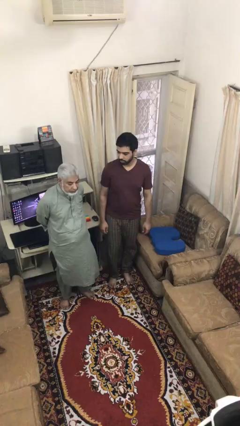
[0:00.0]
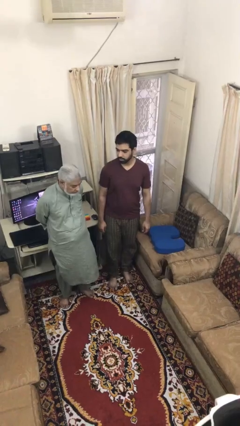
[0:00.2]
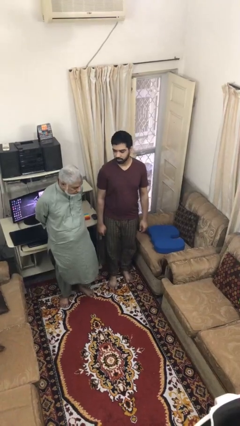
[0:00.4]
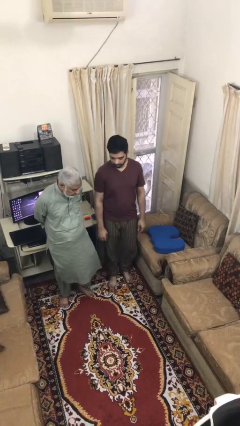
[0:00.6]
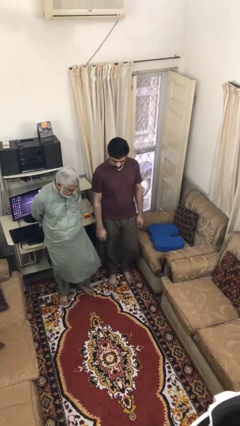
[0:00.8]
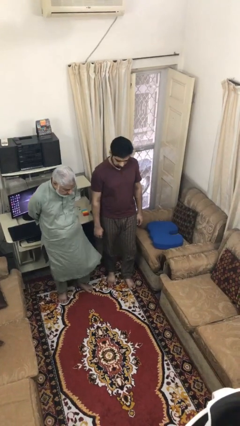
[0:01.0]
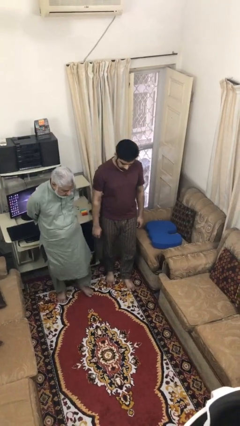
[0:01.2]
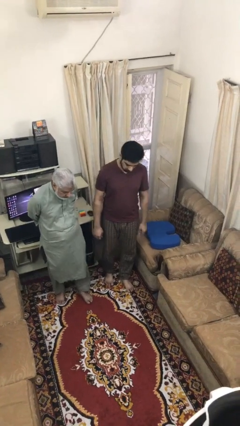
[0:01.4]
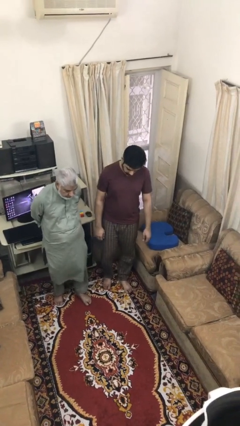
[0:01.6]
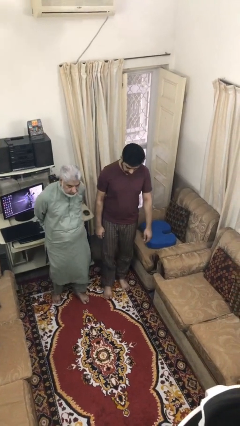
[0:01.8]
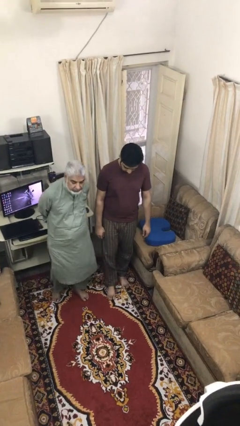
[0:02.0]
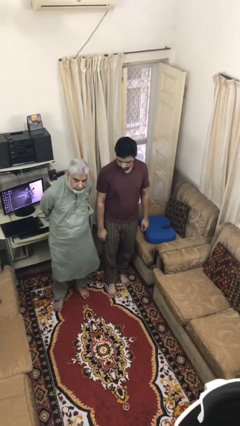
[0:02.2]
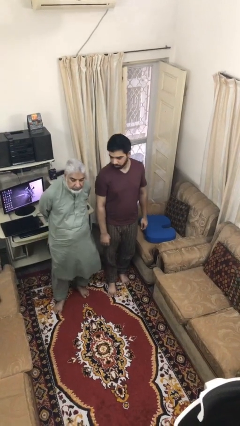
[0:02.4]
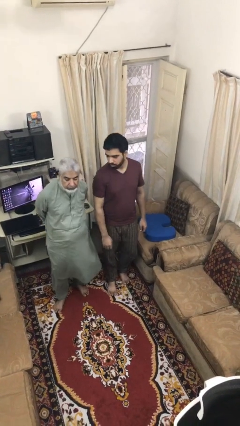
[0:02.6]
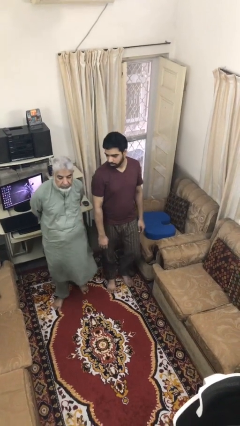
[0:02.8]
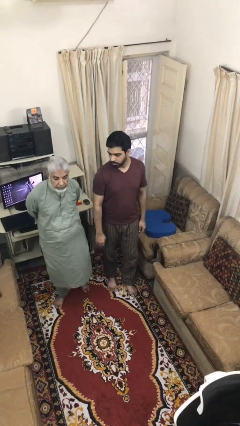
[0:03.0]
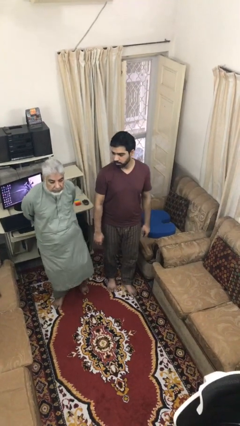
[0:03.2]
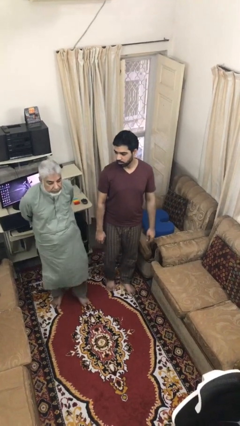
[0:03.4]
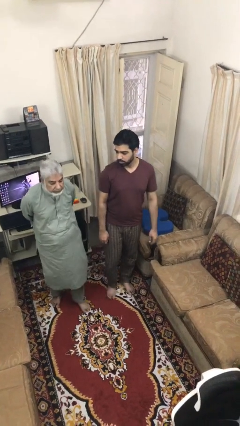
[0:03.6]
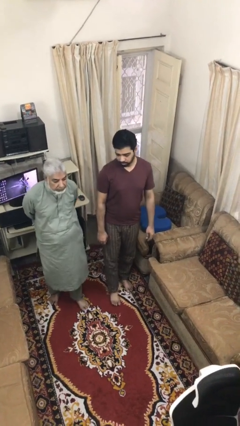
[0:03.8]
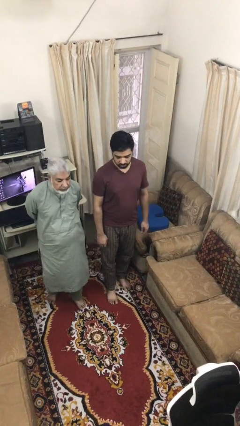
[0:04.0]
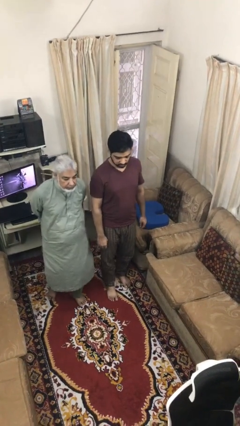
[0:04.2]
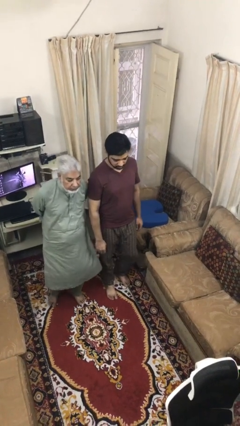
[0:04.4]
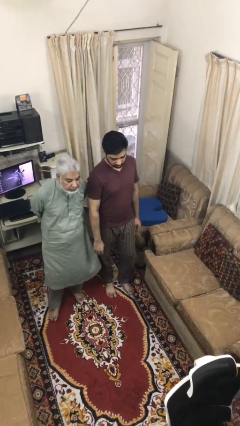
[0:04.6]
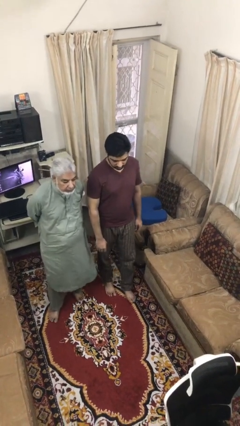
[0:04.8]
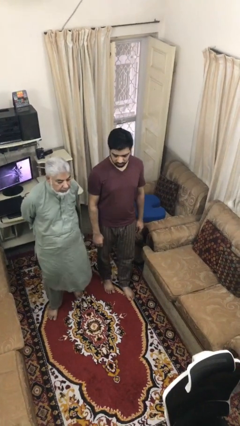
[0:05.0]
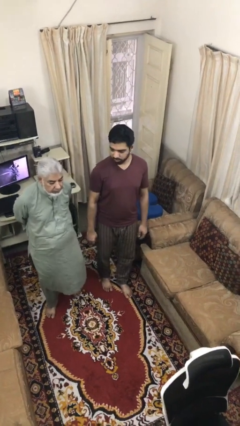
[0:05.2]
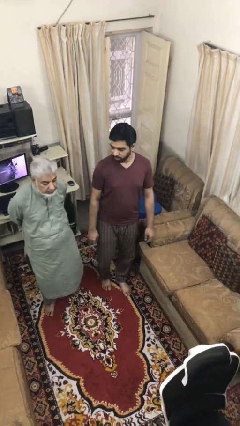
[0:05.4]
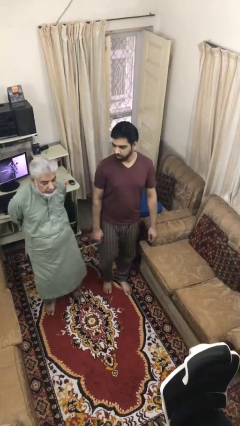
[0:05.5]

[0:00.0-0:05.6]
person talks to person

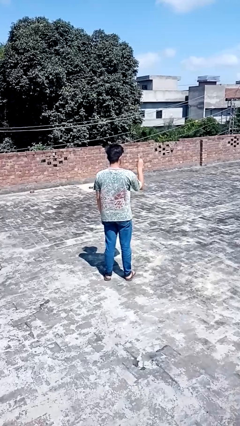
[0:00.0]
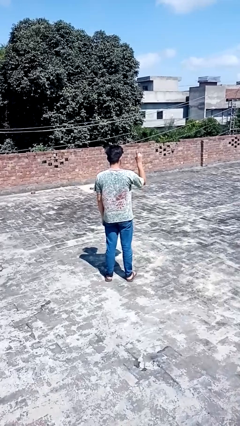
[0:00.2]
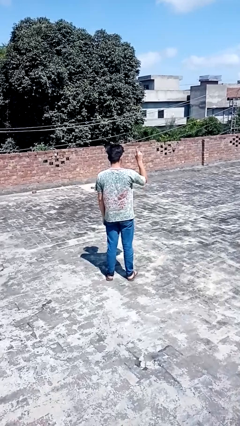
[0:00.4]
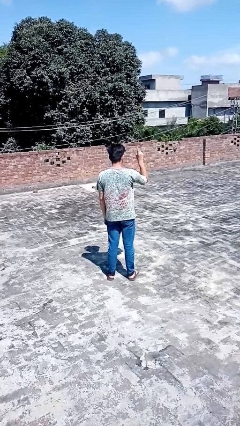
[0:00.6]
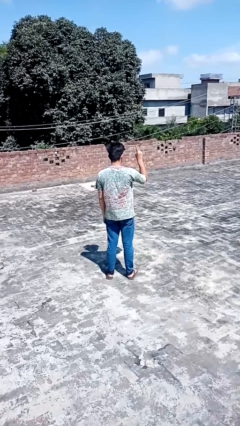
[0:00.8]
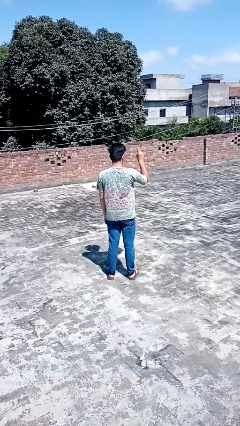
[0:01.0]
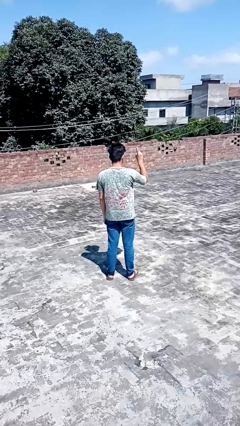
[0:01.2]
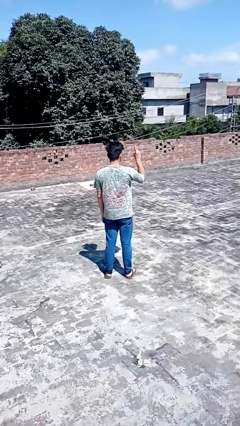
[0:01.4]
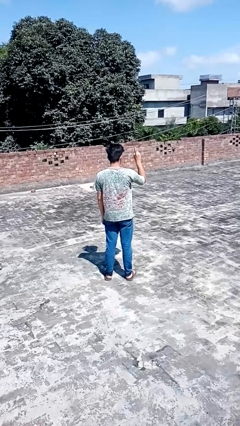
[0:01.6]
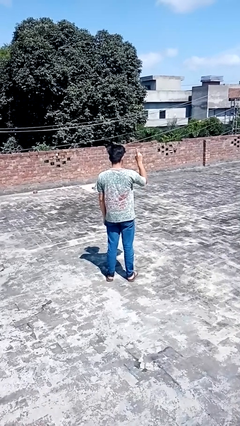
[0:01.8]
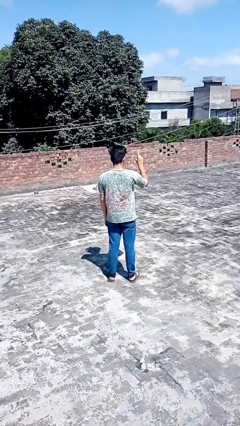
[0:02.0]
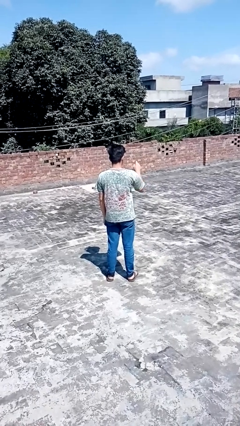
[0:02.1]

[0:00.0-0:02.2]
person gestures number one

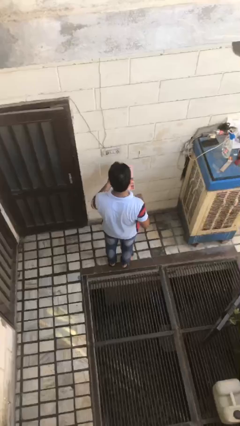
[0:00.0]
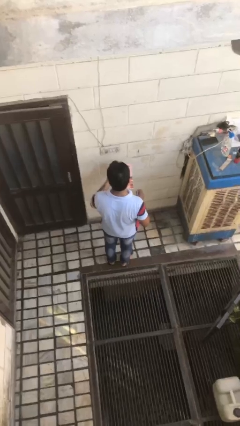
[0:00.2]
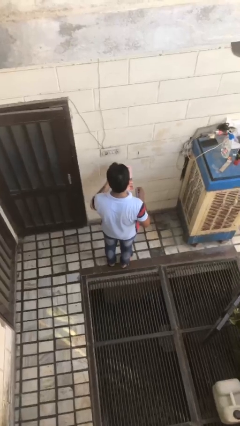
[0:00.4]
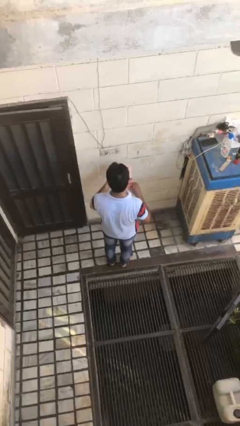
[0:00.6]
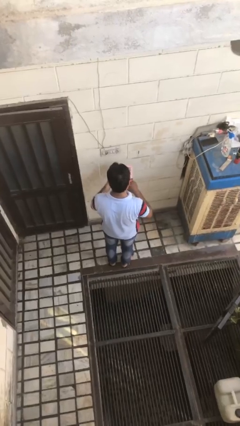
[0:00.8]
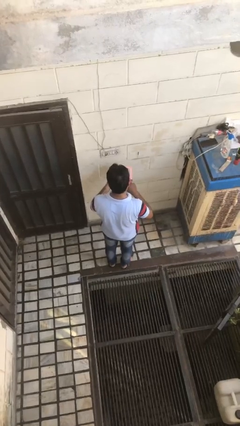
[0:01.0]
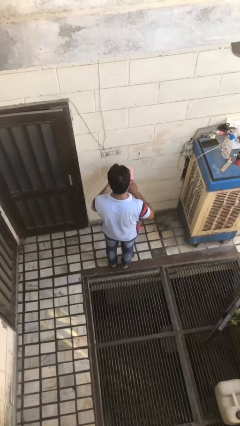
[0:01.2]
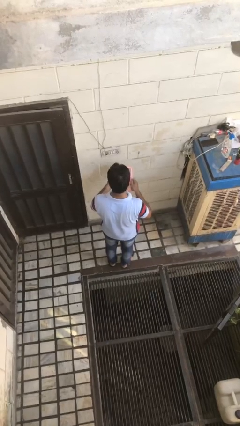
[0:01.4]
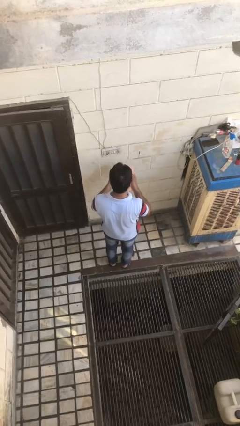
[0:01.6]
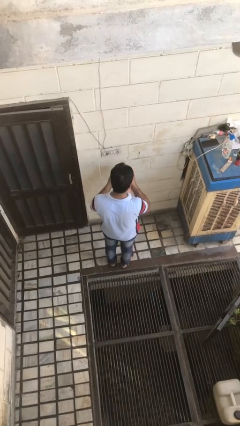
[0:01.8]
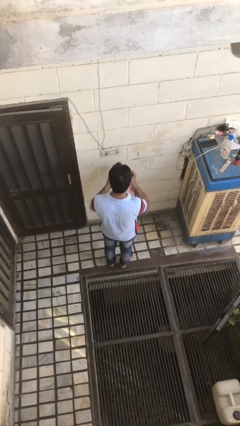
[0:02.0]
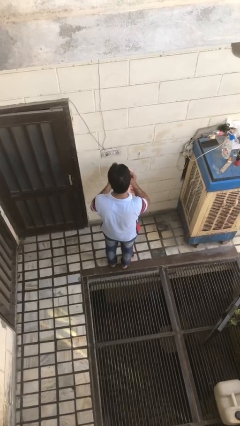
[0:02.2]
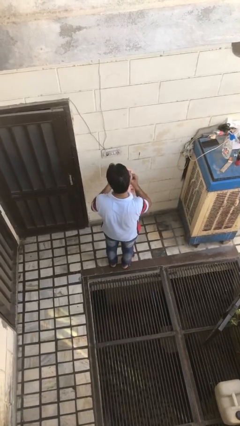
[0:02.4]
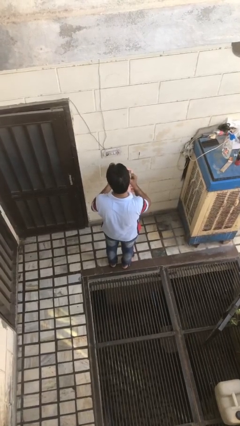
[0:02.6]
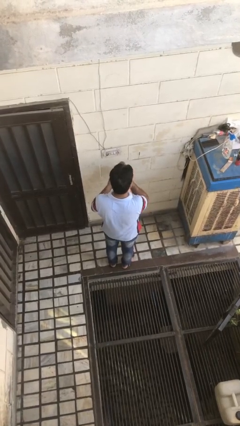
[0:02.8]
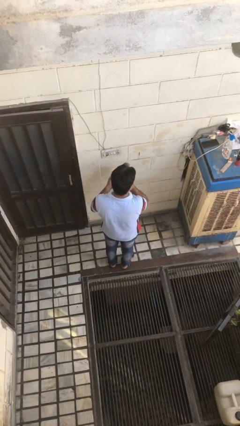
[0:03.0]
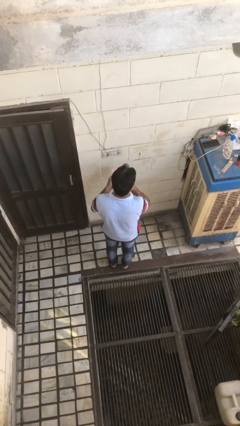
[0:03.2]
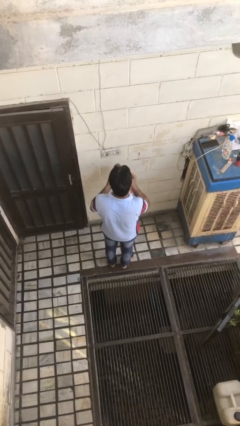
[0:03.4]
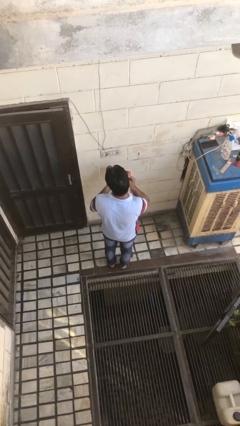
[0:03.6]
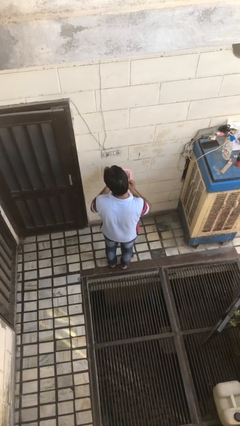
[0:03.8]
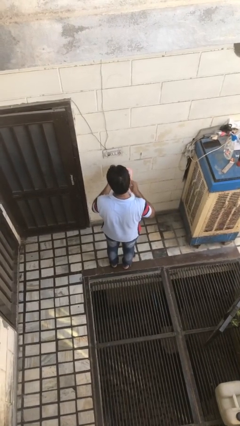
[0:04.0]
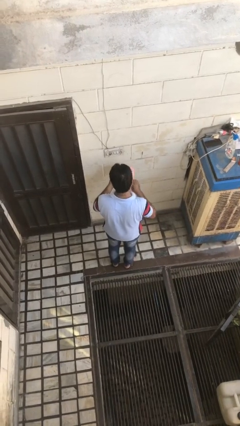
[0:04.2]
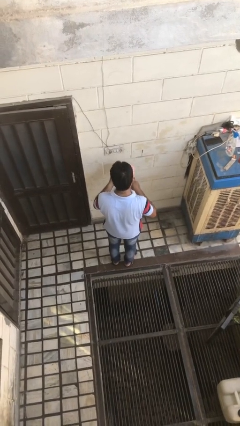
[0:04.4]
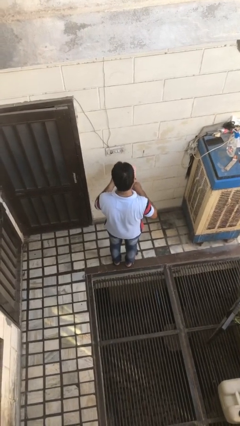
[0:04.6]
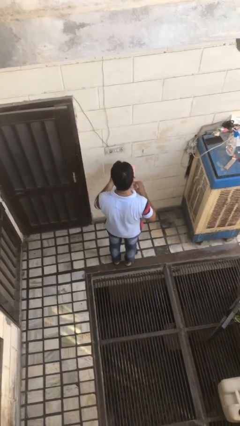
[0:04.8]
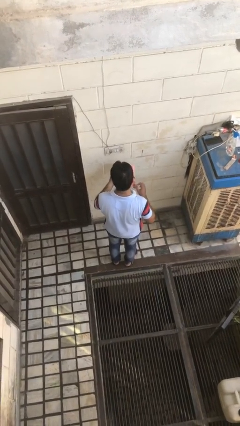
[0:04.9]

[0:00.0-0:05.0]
person applies foundation makeup

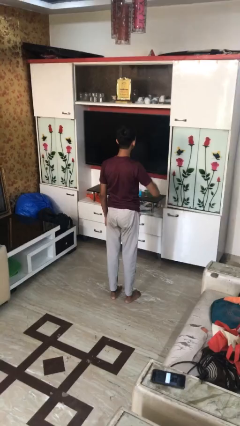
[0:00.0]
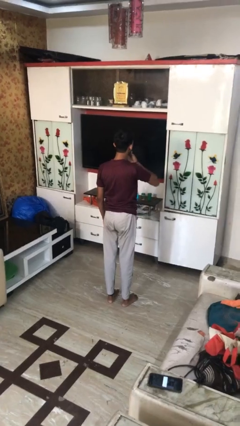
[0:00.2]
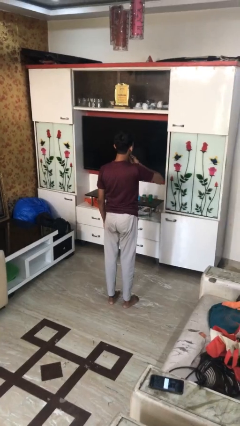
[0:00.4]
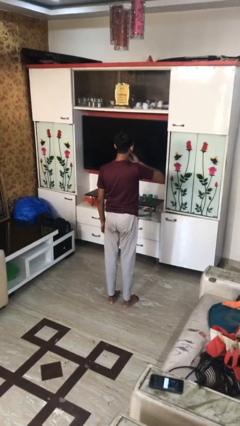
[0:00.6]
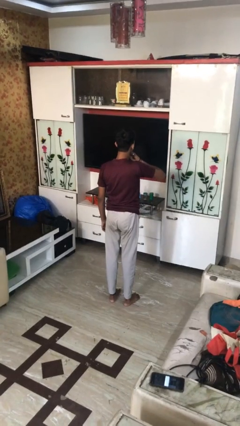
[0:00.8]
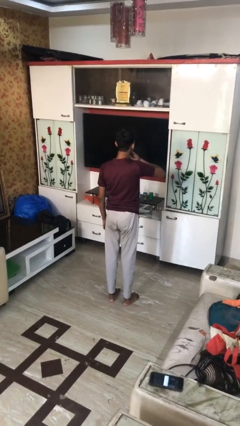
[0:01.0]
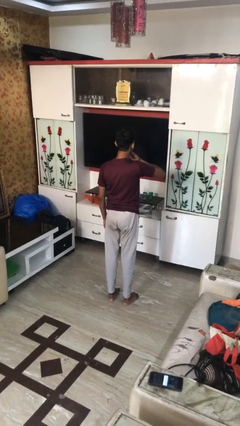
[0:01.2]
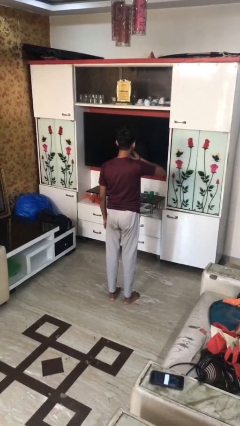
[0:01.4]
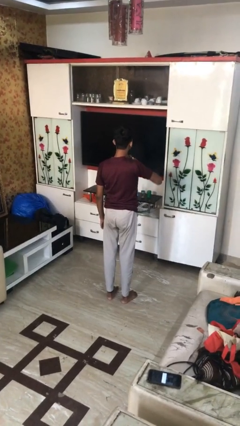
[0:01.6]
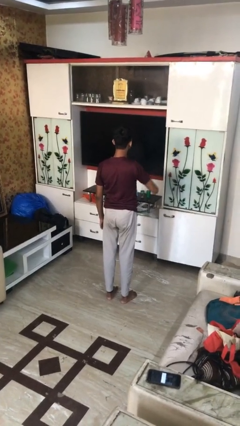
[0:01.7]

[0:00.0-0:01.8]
person strokes chin

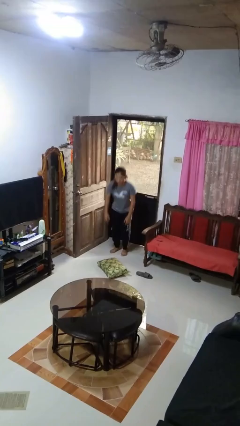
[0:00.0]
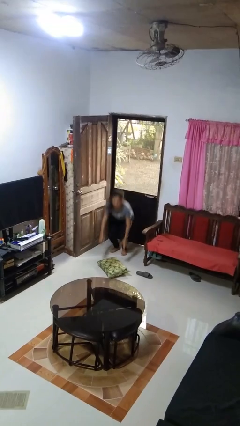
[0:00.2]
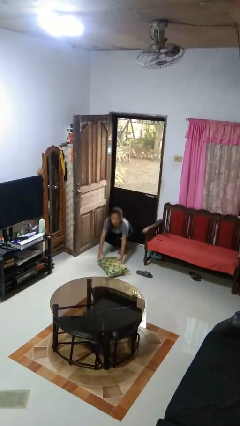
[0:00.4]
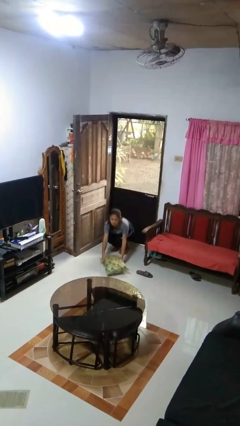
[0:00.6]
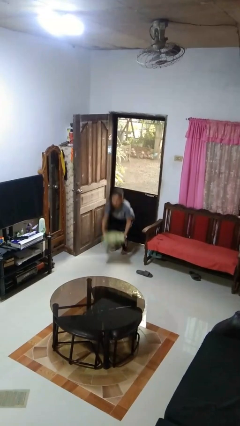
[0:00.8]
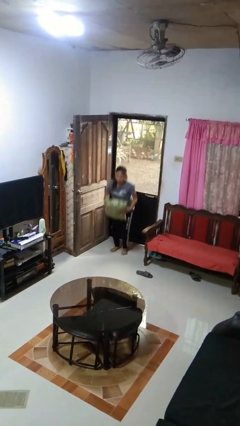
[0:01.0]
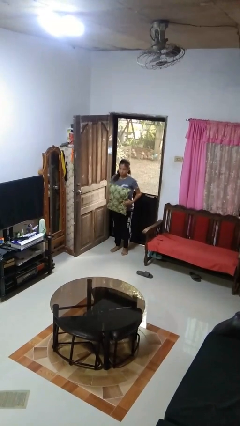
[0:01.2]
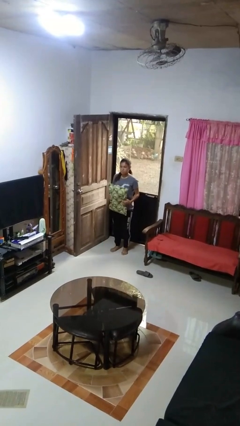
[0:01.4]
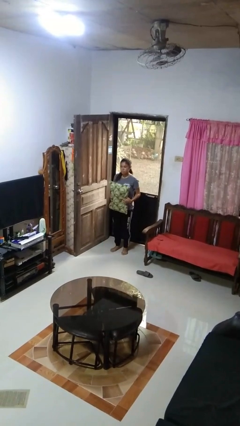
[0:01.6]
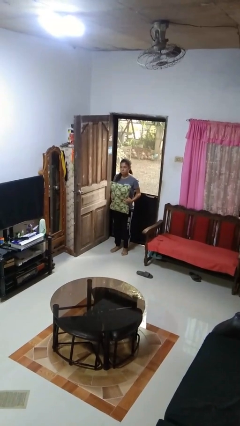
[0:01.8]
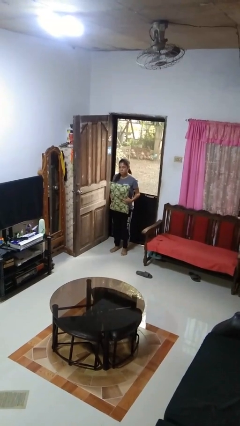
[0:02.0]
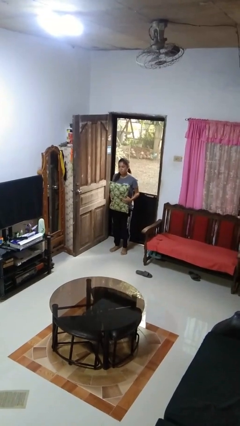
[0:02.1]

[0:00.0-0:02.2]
person picks up object from floor

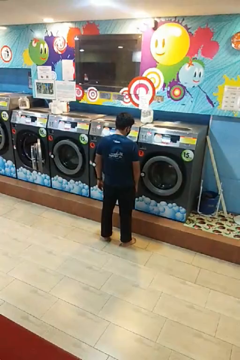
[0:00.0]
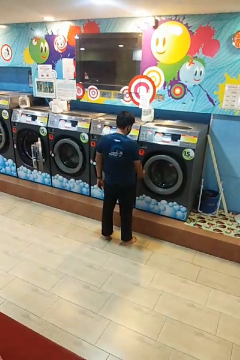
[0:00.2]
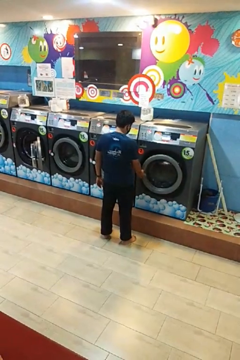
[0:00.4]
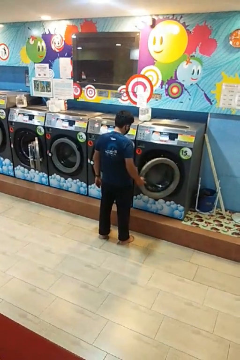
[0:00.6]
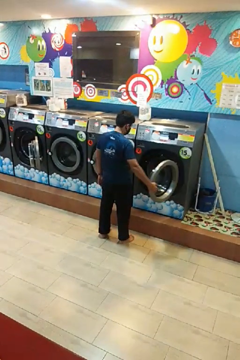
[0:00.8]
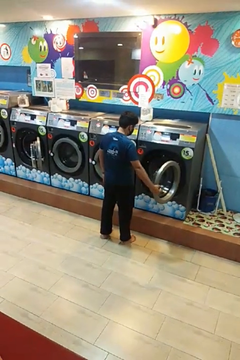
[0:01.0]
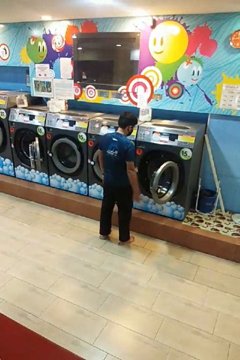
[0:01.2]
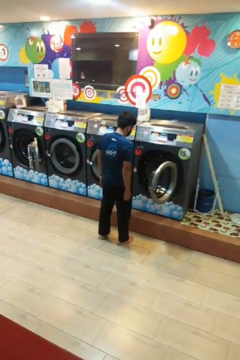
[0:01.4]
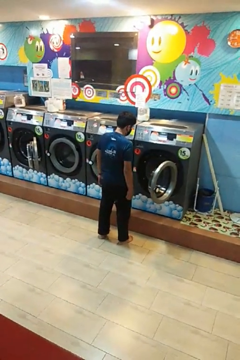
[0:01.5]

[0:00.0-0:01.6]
person opens clothes washer
